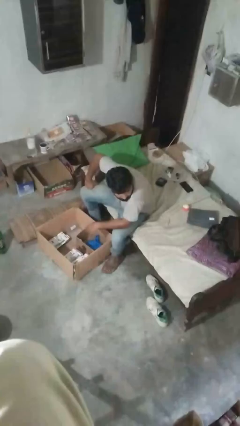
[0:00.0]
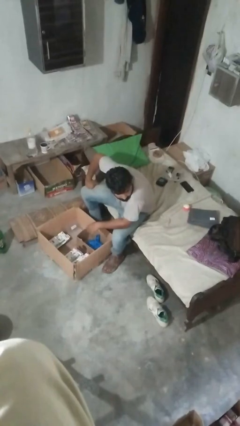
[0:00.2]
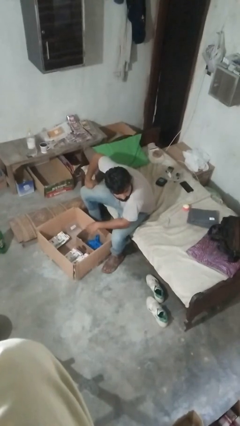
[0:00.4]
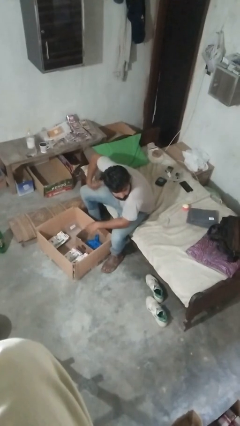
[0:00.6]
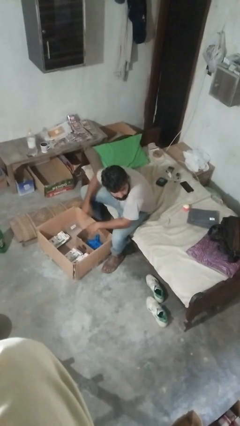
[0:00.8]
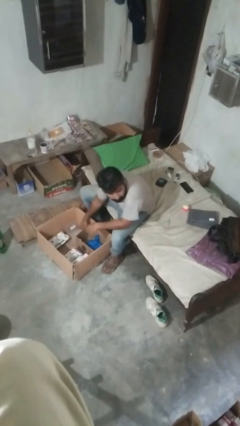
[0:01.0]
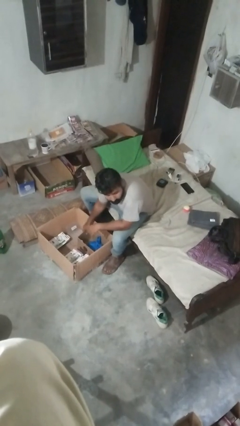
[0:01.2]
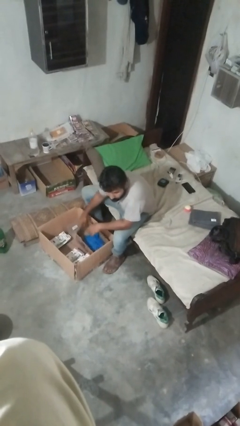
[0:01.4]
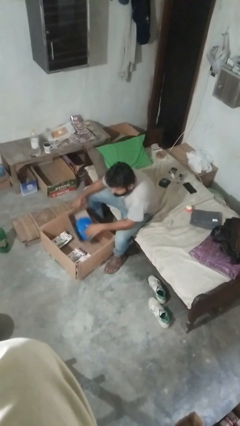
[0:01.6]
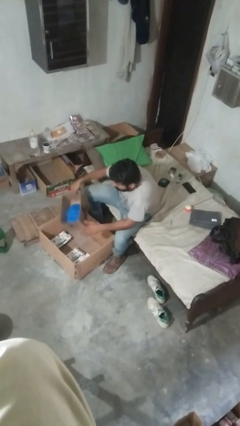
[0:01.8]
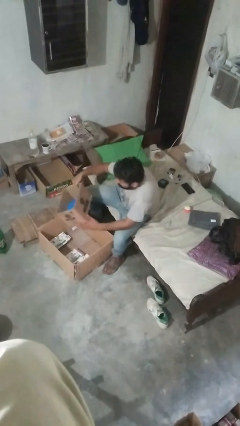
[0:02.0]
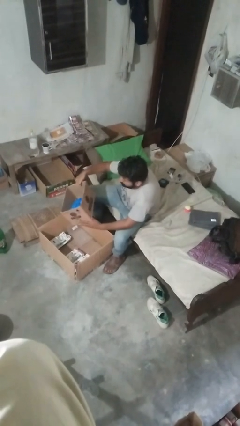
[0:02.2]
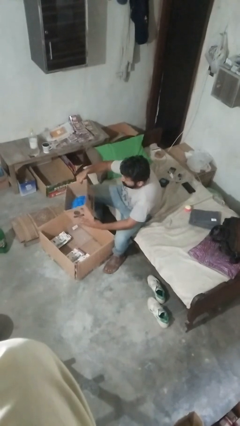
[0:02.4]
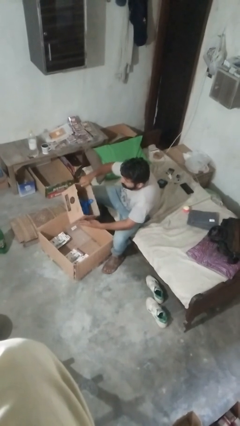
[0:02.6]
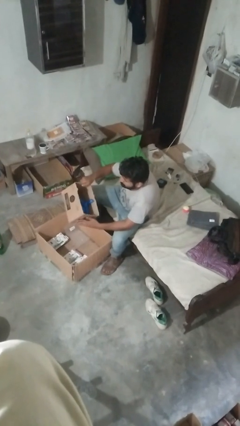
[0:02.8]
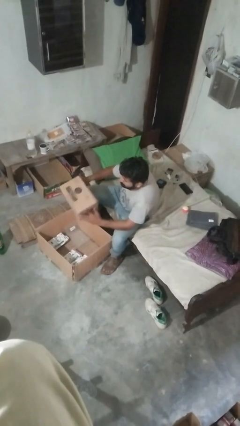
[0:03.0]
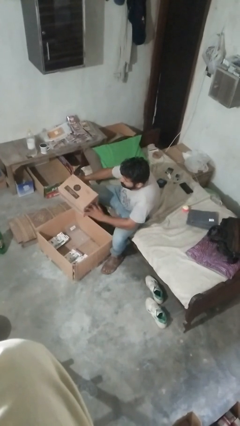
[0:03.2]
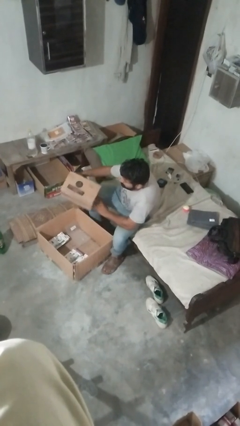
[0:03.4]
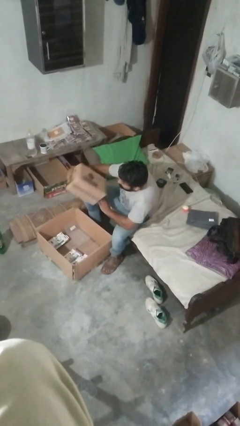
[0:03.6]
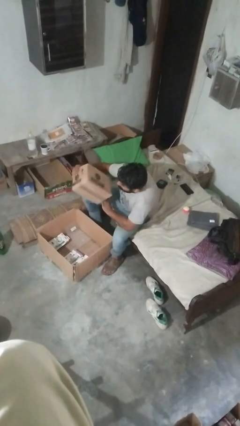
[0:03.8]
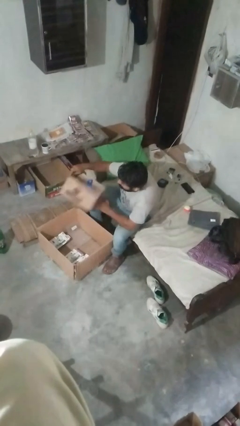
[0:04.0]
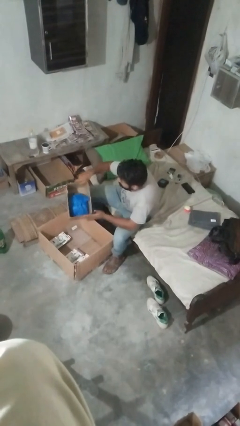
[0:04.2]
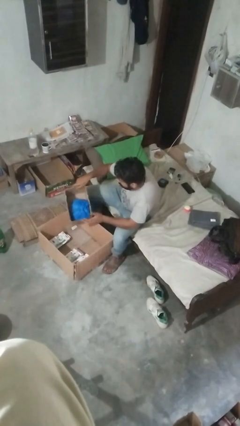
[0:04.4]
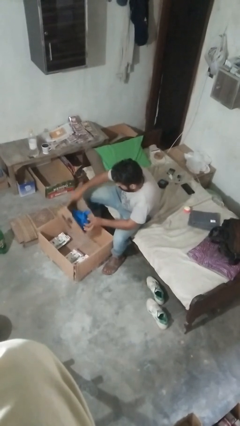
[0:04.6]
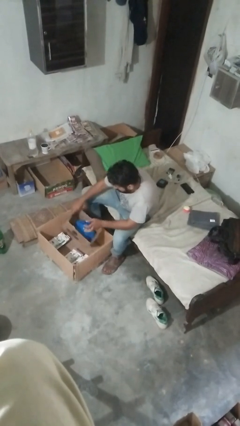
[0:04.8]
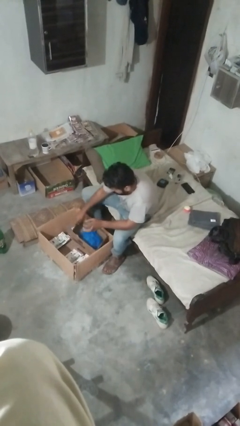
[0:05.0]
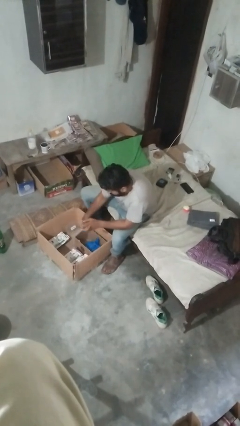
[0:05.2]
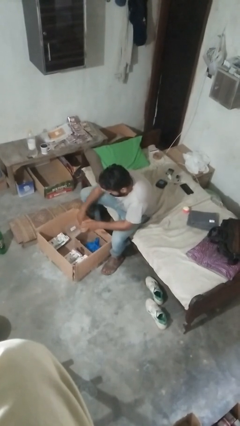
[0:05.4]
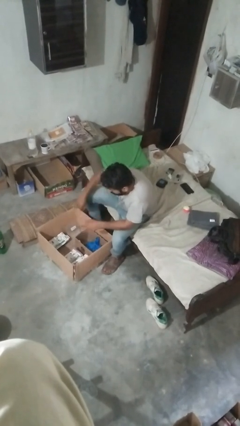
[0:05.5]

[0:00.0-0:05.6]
person searches in box

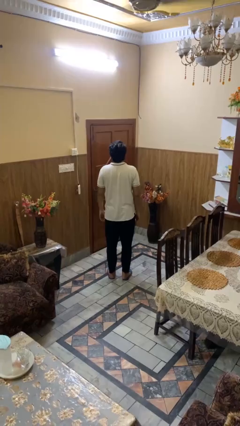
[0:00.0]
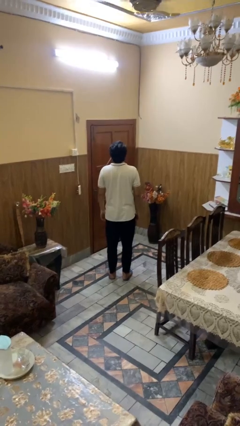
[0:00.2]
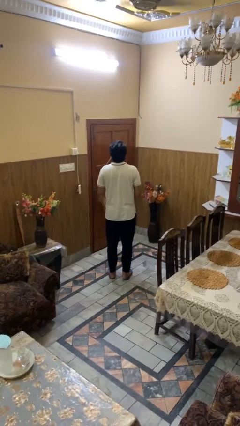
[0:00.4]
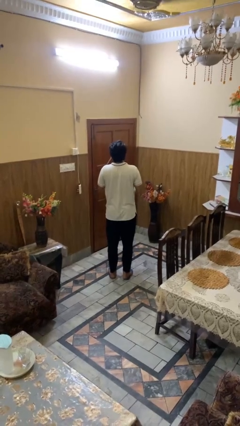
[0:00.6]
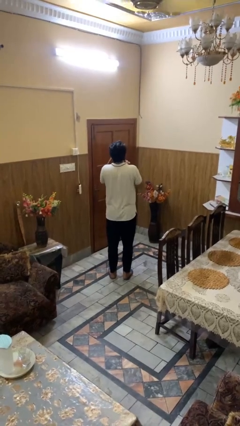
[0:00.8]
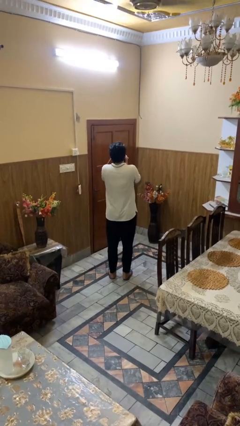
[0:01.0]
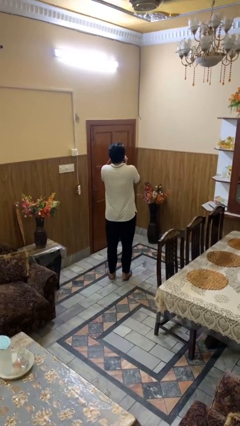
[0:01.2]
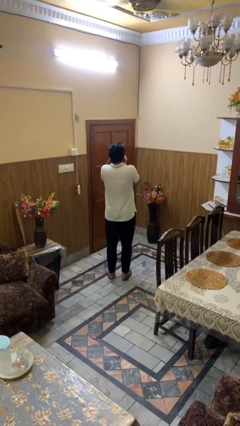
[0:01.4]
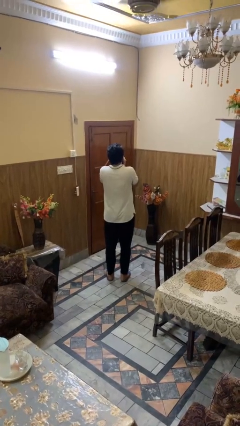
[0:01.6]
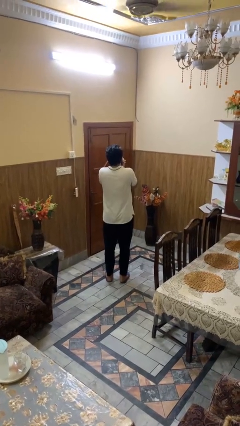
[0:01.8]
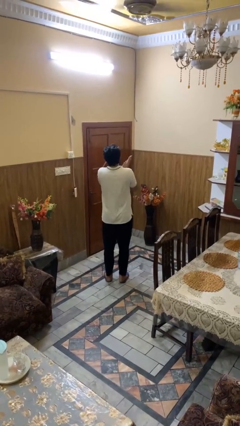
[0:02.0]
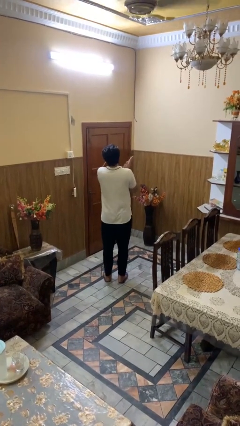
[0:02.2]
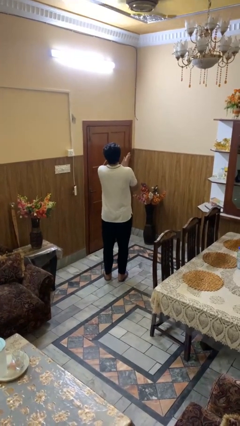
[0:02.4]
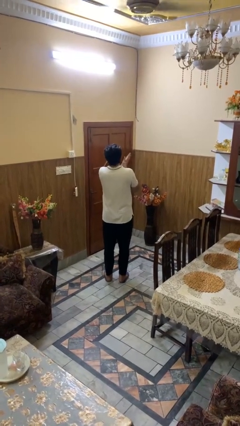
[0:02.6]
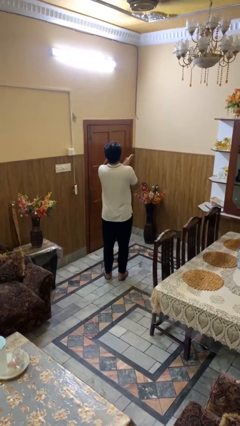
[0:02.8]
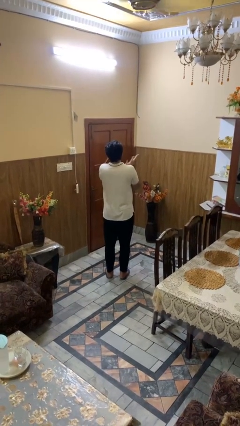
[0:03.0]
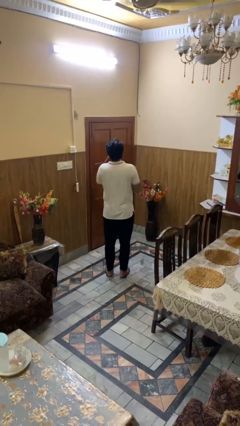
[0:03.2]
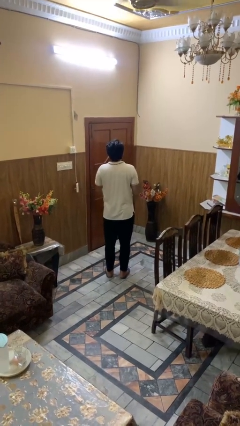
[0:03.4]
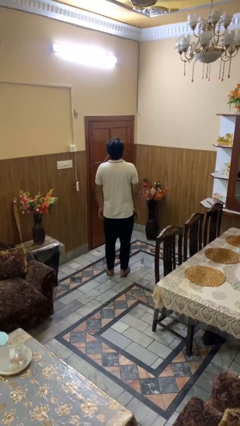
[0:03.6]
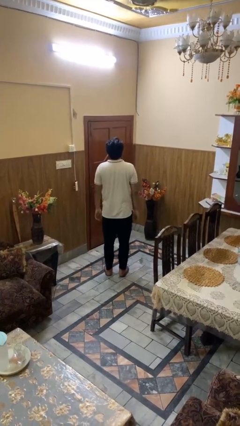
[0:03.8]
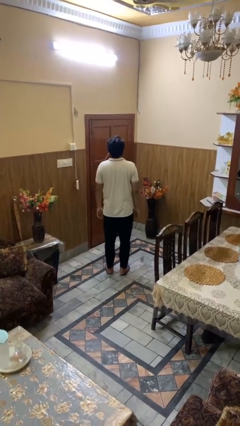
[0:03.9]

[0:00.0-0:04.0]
person blows into hands

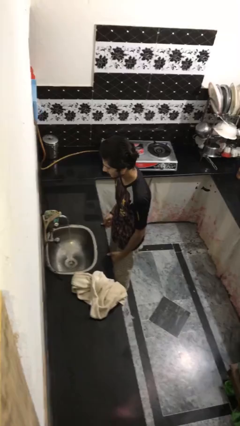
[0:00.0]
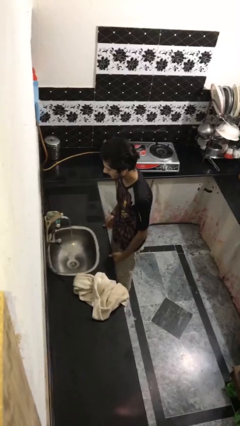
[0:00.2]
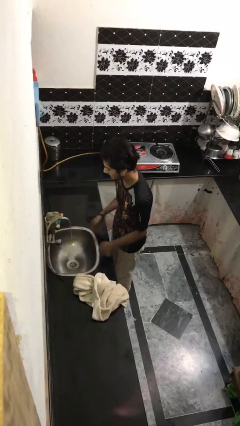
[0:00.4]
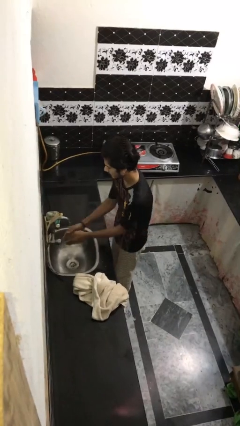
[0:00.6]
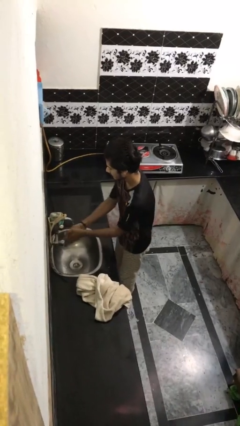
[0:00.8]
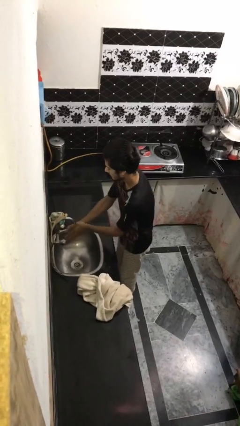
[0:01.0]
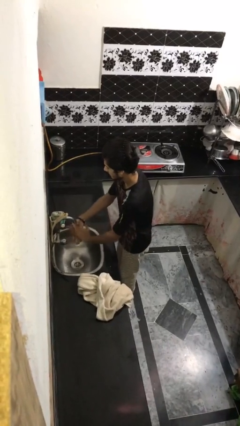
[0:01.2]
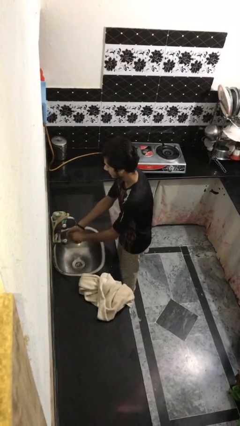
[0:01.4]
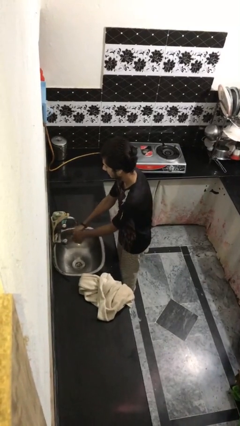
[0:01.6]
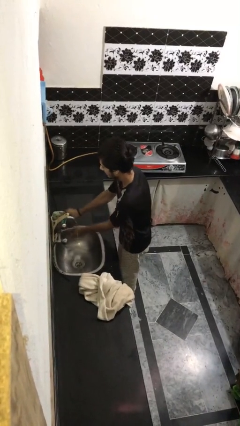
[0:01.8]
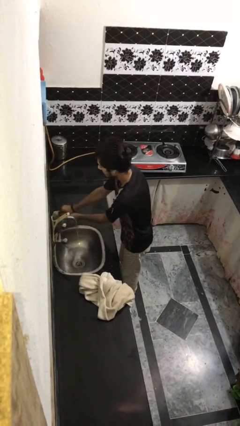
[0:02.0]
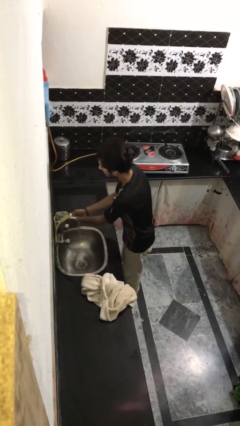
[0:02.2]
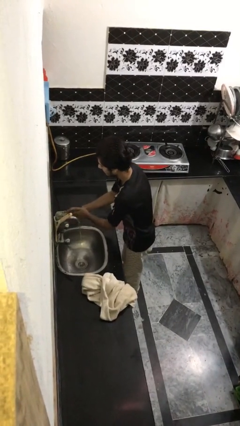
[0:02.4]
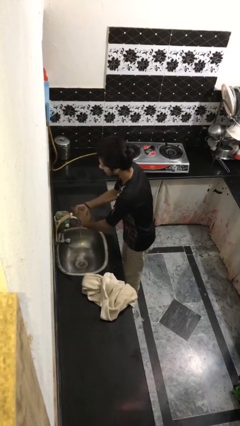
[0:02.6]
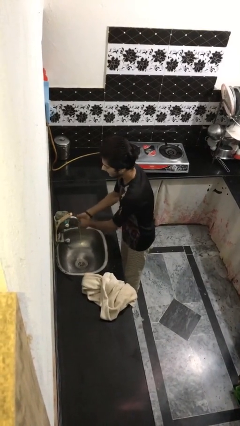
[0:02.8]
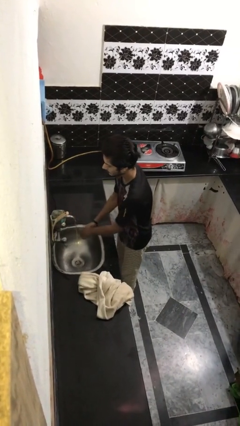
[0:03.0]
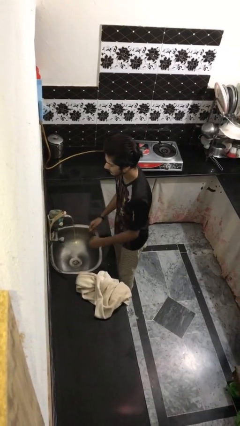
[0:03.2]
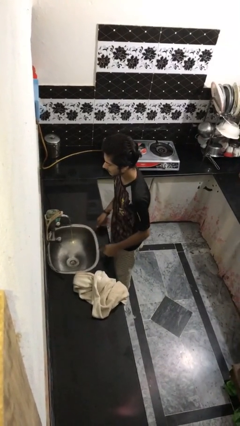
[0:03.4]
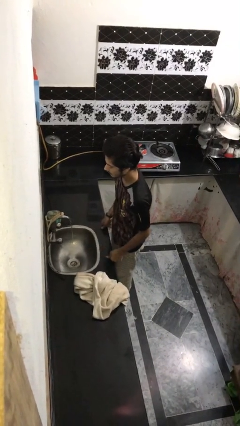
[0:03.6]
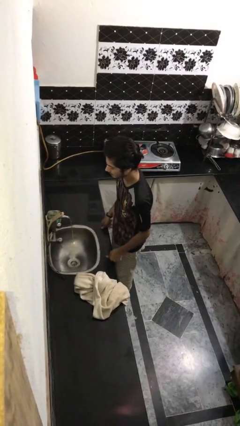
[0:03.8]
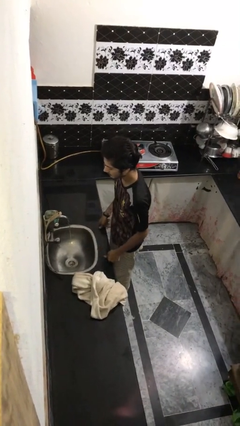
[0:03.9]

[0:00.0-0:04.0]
person washes face

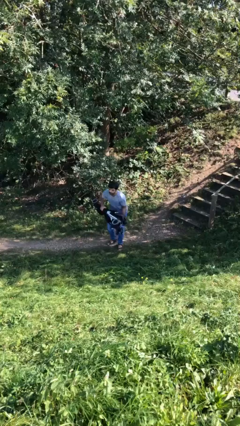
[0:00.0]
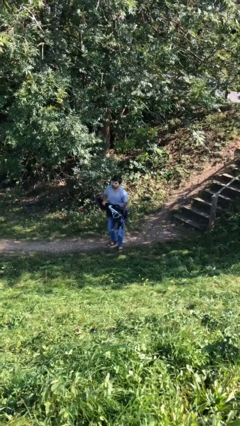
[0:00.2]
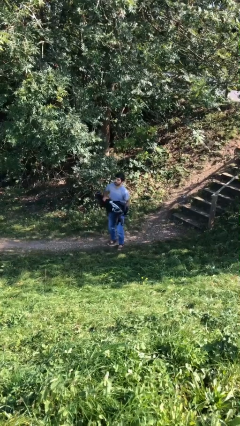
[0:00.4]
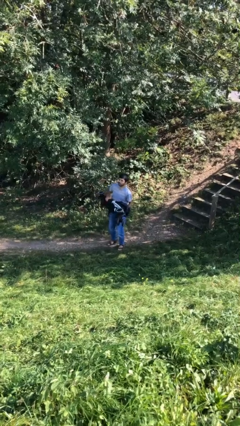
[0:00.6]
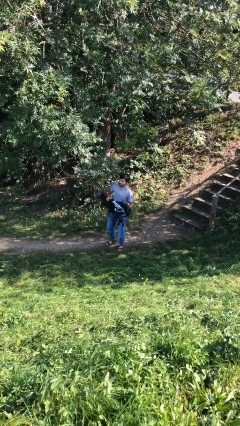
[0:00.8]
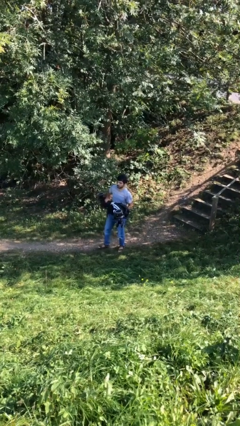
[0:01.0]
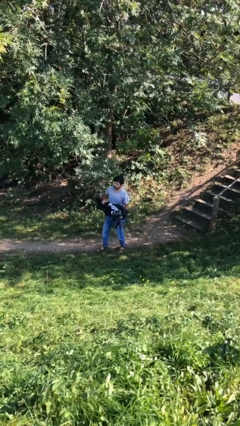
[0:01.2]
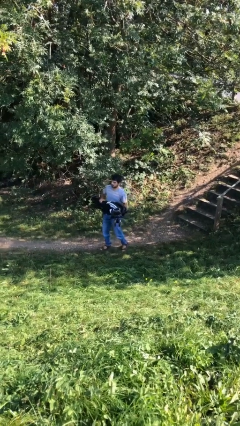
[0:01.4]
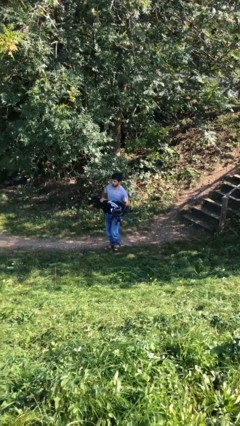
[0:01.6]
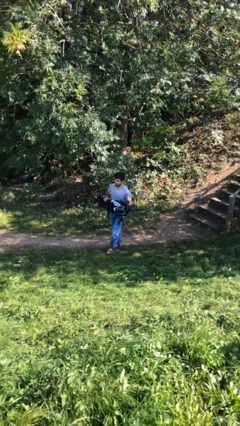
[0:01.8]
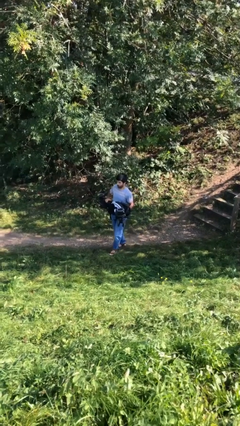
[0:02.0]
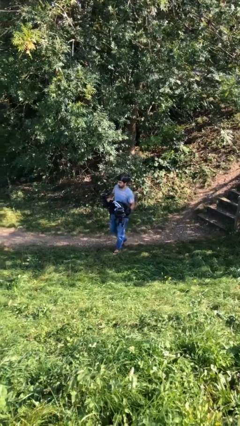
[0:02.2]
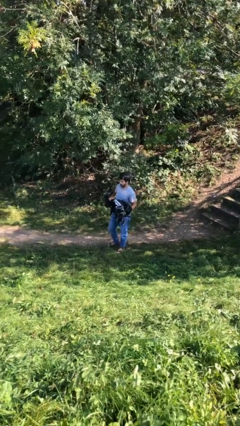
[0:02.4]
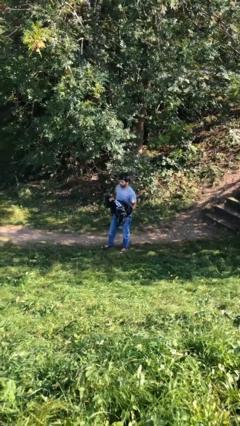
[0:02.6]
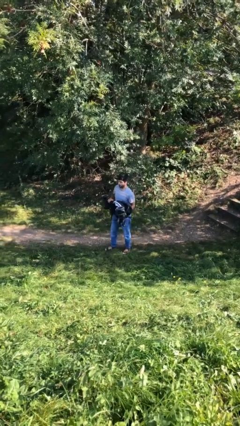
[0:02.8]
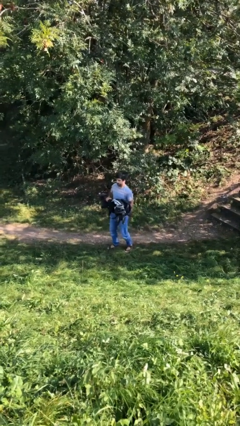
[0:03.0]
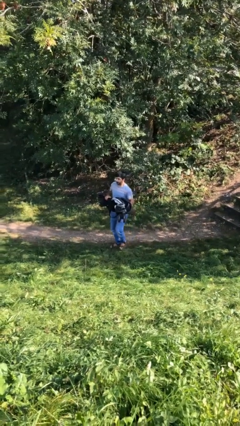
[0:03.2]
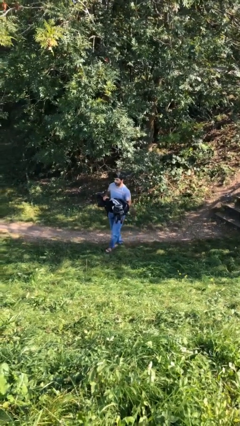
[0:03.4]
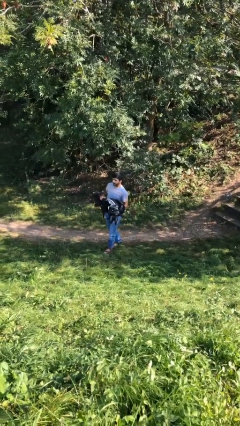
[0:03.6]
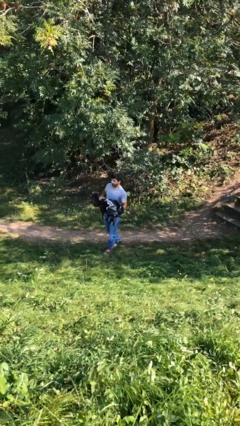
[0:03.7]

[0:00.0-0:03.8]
person carries heavy object

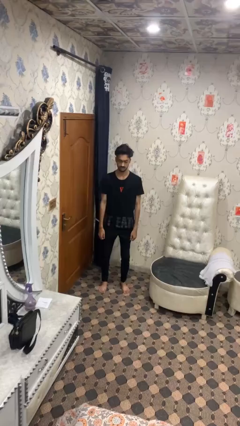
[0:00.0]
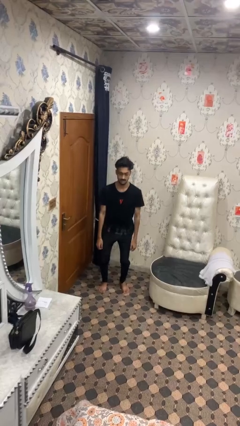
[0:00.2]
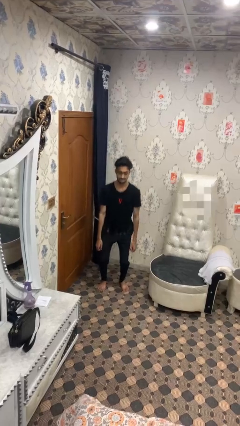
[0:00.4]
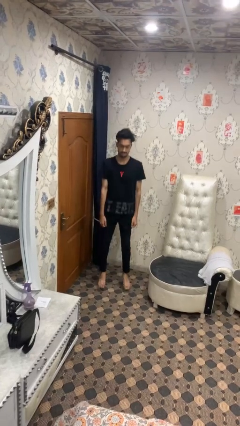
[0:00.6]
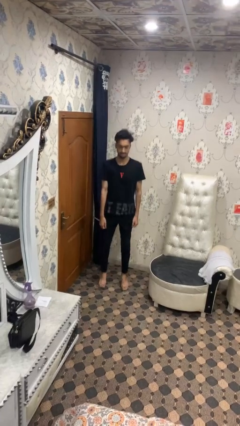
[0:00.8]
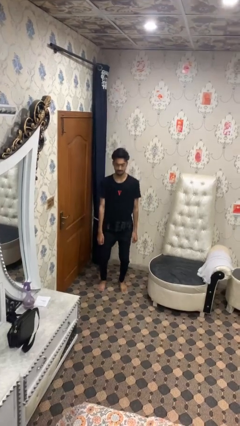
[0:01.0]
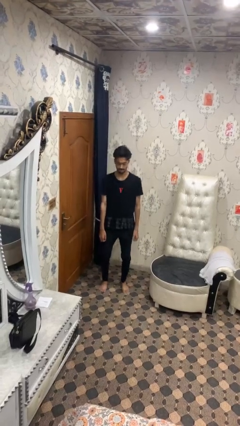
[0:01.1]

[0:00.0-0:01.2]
person jumps
